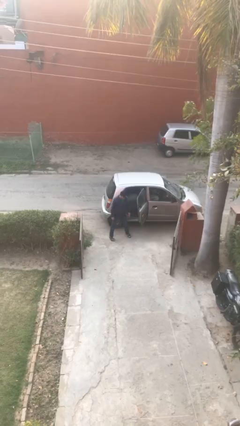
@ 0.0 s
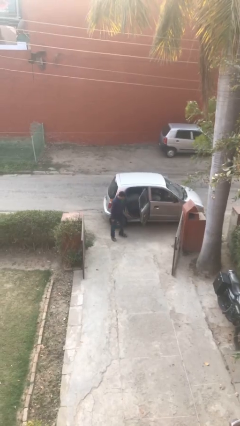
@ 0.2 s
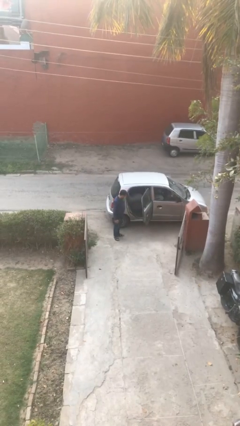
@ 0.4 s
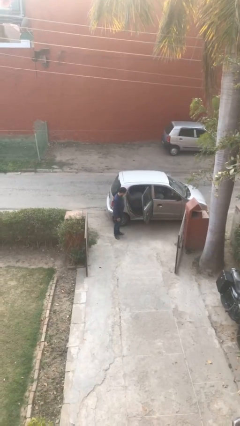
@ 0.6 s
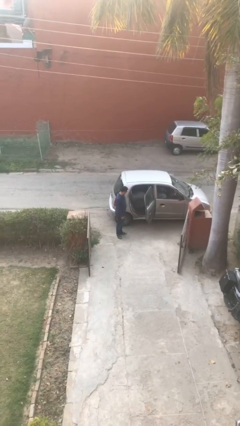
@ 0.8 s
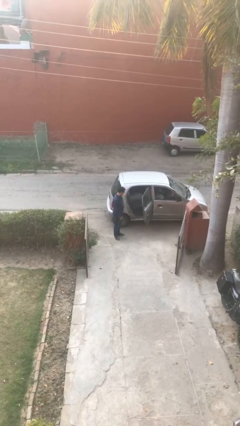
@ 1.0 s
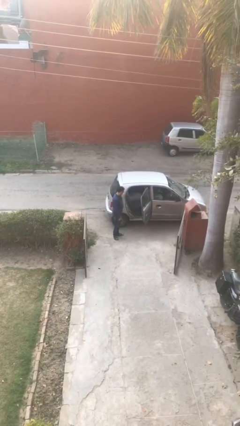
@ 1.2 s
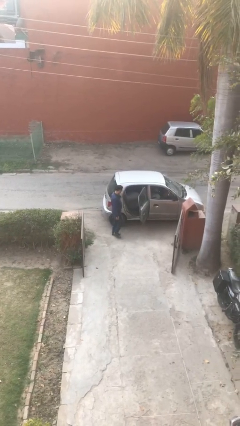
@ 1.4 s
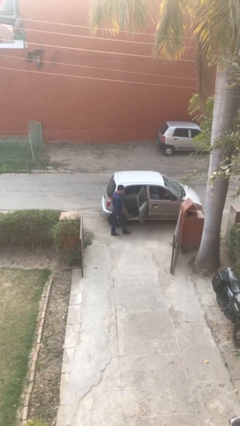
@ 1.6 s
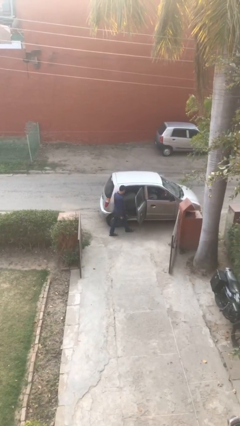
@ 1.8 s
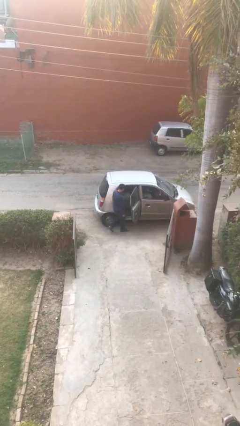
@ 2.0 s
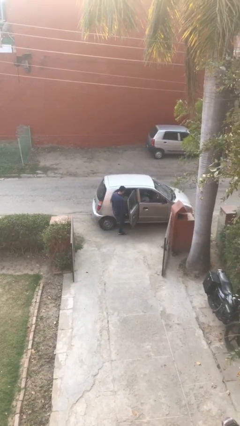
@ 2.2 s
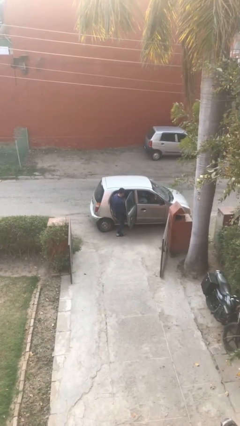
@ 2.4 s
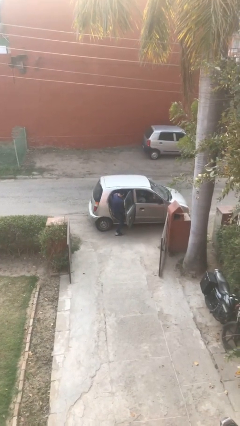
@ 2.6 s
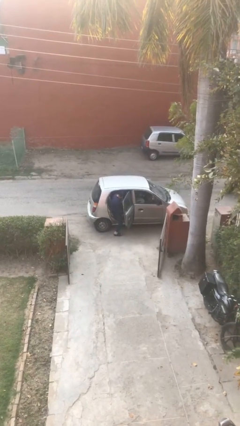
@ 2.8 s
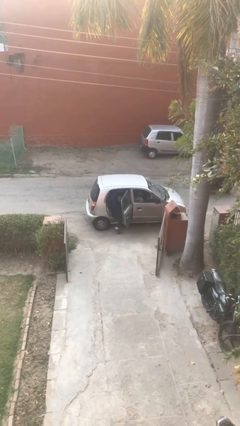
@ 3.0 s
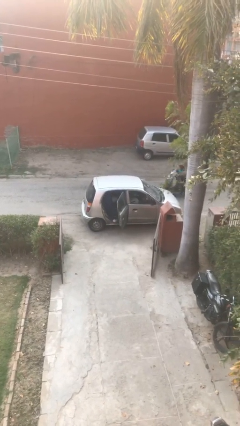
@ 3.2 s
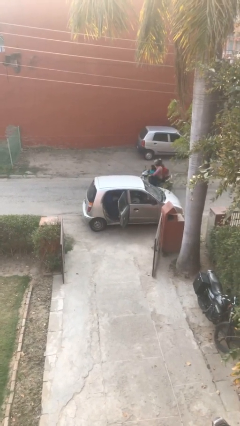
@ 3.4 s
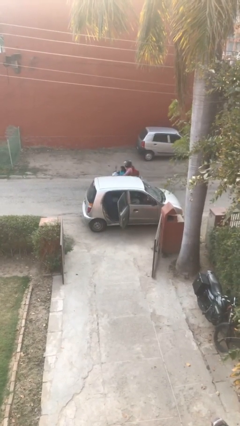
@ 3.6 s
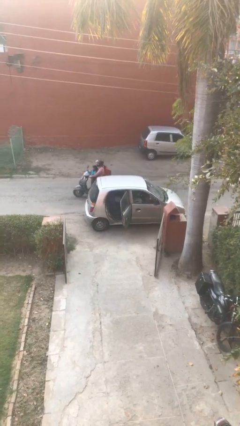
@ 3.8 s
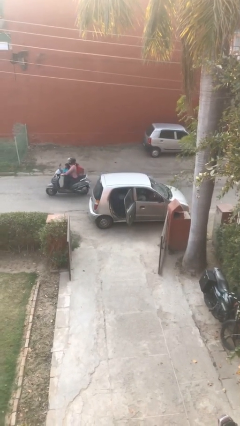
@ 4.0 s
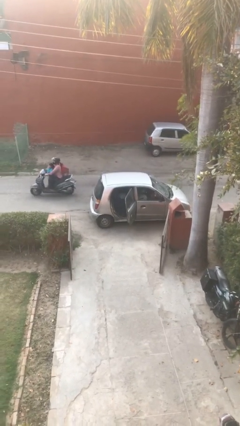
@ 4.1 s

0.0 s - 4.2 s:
person enters car

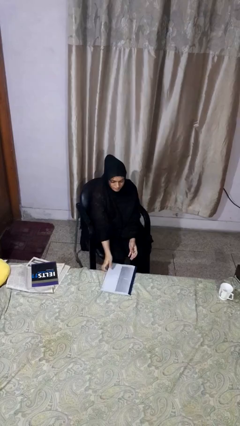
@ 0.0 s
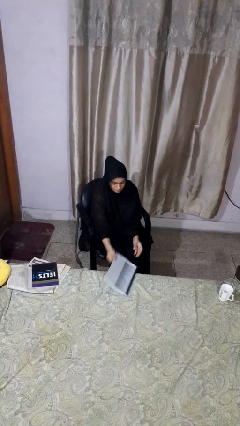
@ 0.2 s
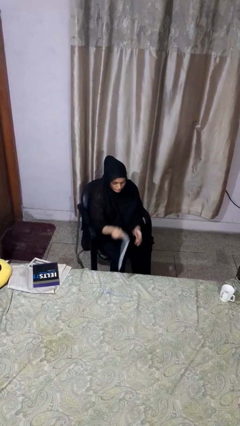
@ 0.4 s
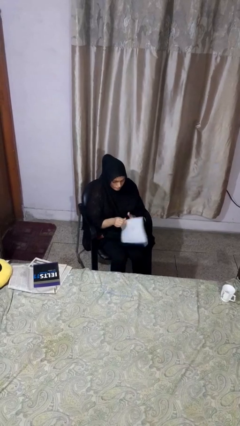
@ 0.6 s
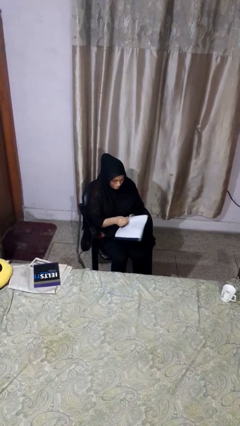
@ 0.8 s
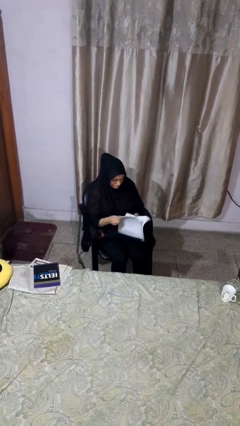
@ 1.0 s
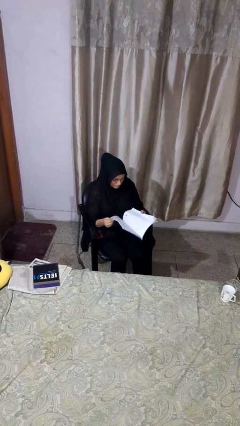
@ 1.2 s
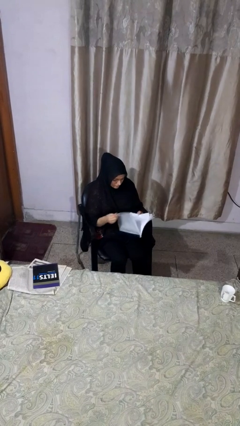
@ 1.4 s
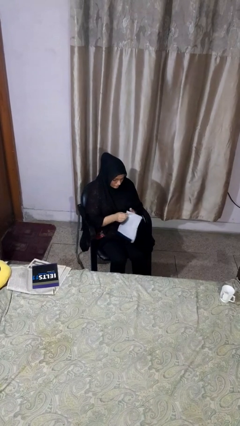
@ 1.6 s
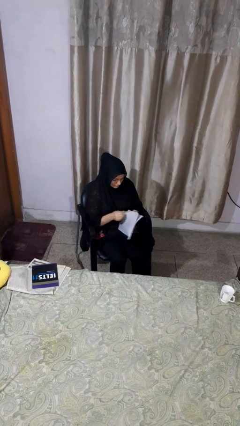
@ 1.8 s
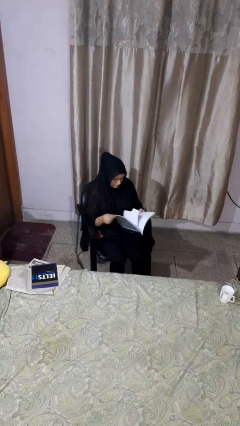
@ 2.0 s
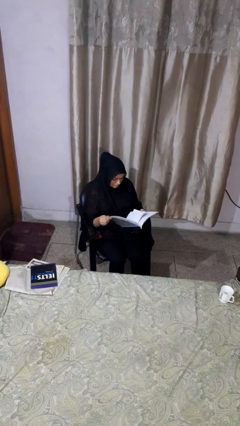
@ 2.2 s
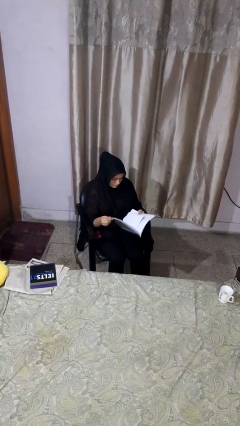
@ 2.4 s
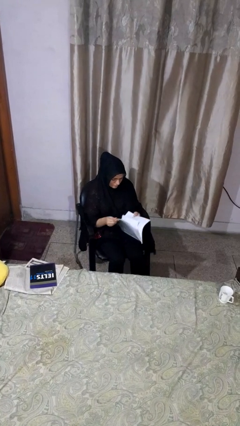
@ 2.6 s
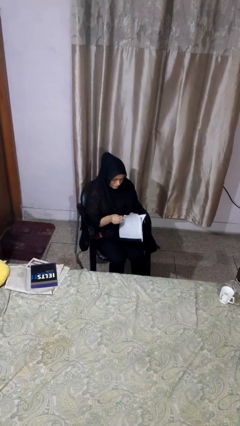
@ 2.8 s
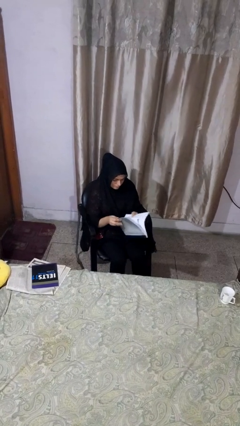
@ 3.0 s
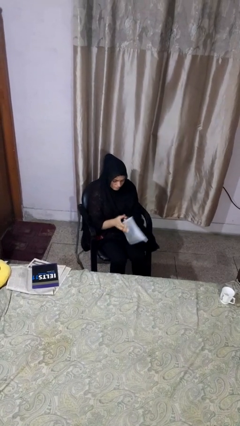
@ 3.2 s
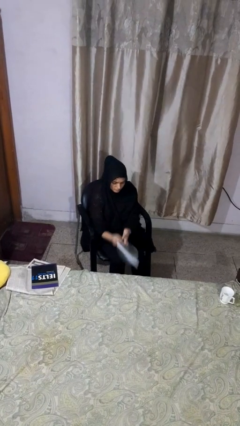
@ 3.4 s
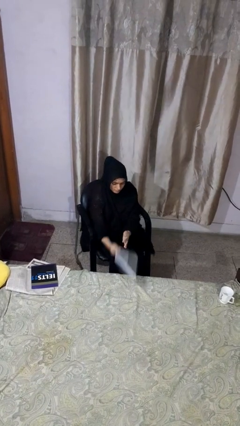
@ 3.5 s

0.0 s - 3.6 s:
person reads magazine

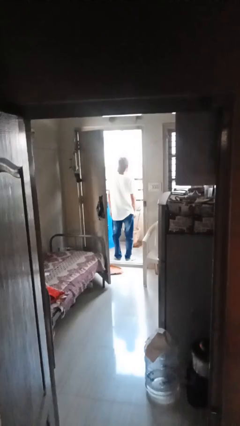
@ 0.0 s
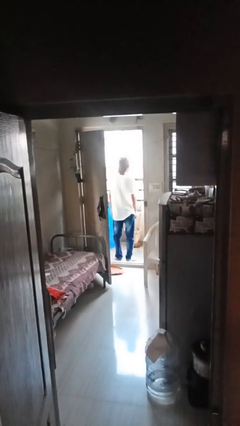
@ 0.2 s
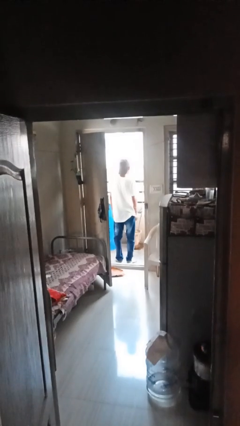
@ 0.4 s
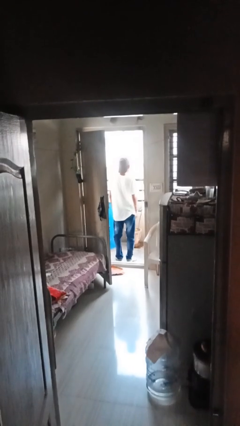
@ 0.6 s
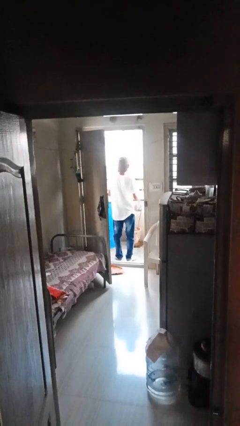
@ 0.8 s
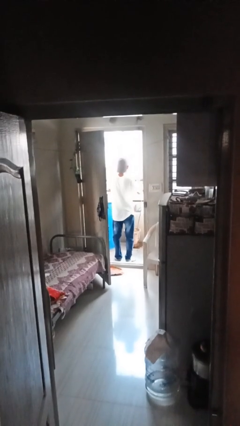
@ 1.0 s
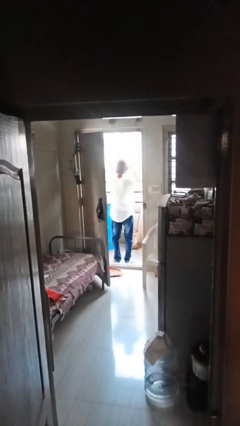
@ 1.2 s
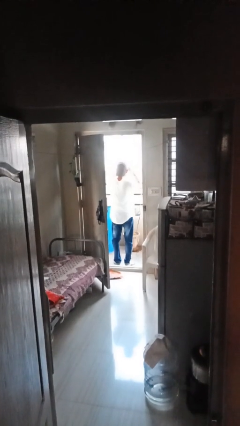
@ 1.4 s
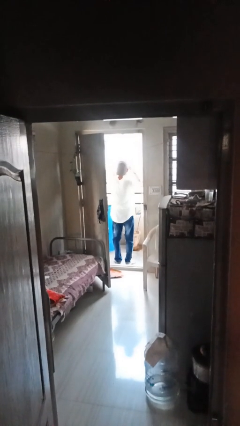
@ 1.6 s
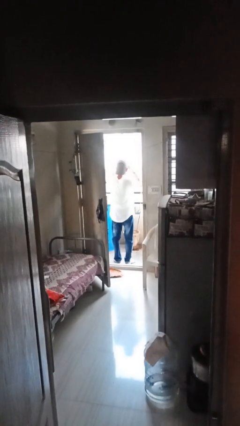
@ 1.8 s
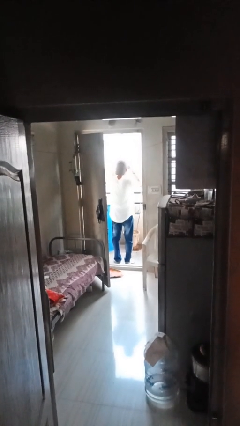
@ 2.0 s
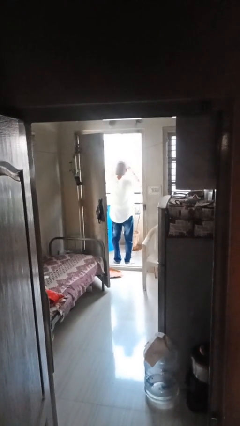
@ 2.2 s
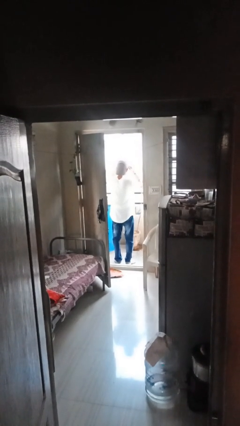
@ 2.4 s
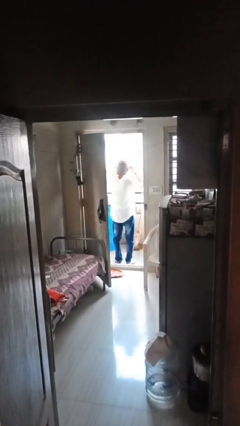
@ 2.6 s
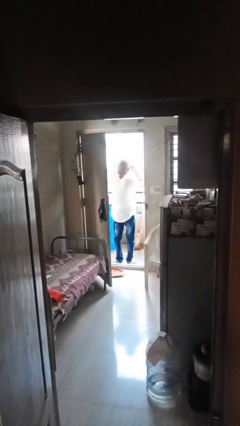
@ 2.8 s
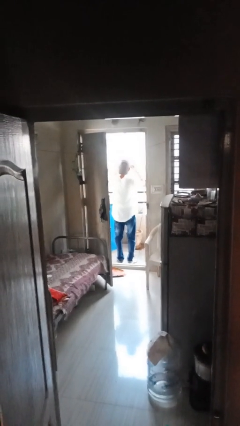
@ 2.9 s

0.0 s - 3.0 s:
person shades eyes

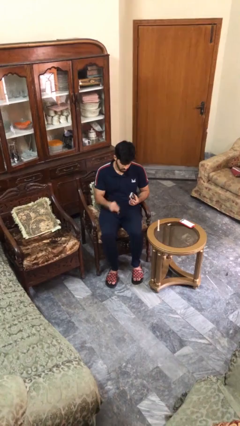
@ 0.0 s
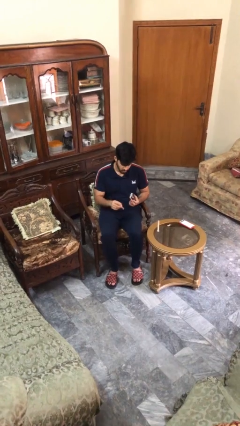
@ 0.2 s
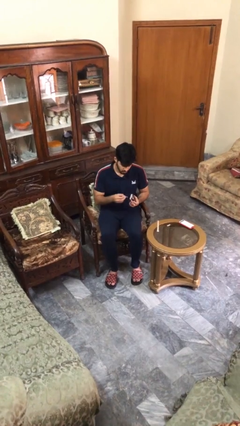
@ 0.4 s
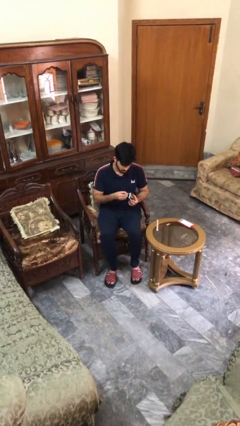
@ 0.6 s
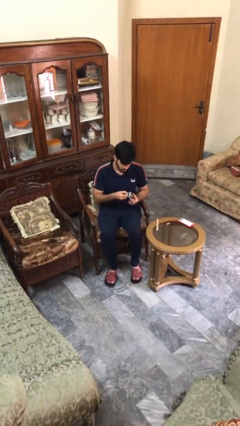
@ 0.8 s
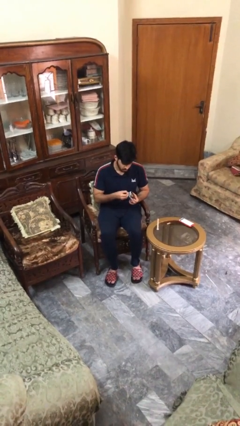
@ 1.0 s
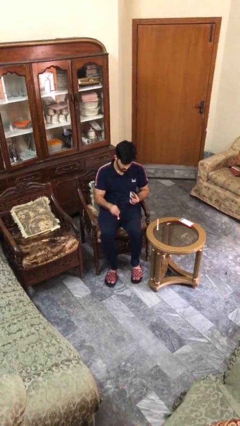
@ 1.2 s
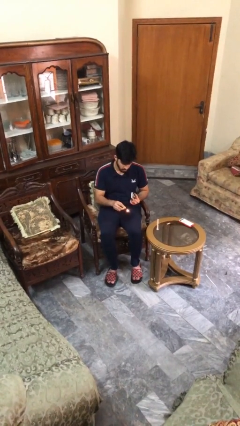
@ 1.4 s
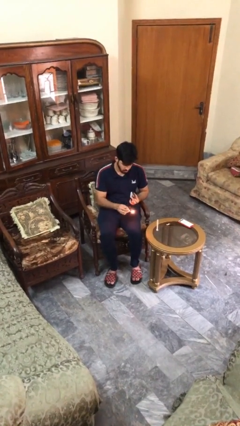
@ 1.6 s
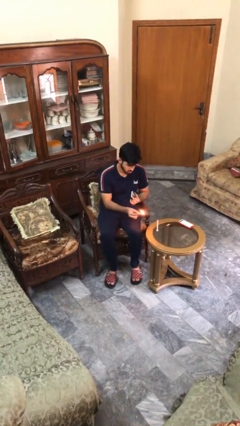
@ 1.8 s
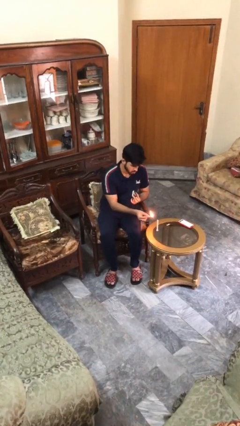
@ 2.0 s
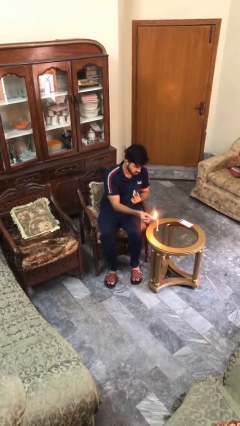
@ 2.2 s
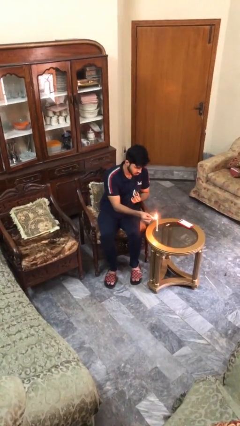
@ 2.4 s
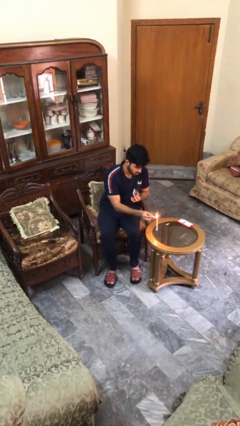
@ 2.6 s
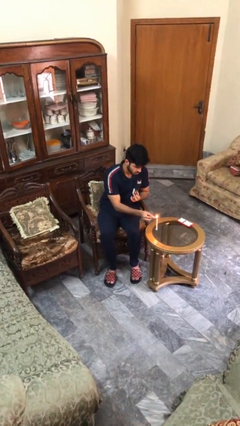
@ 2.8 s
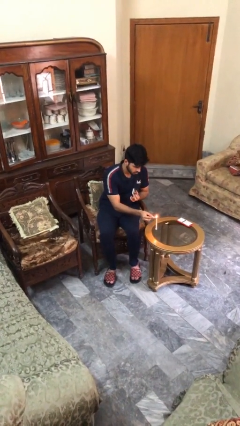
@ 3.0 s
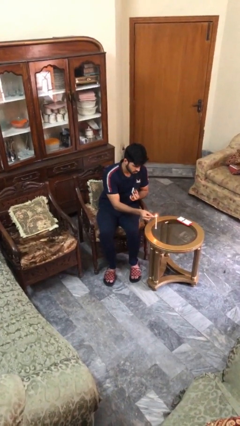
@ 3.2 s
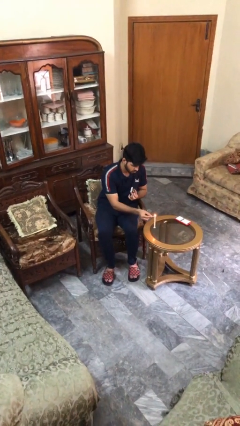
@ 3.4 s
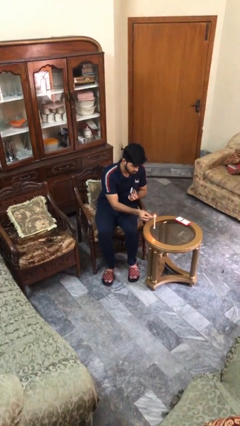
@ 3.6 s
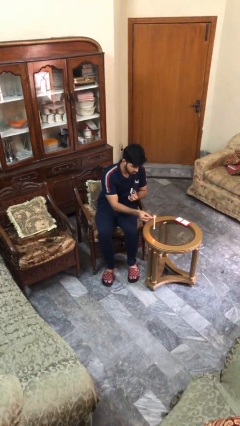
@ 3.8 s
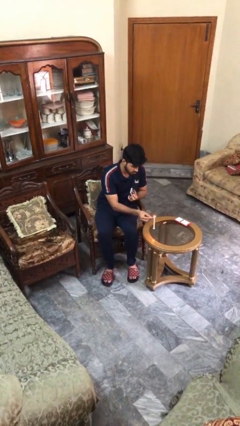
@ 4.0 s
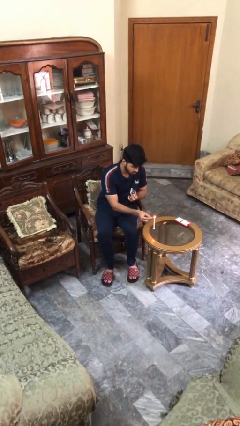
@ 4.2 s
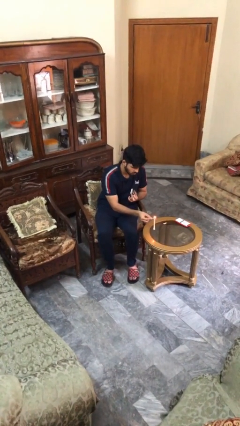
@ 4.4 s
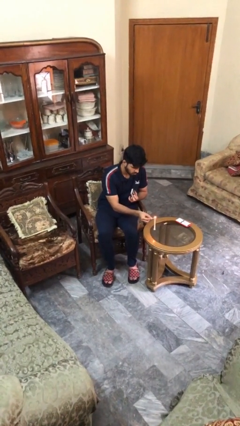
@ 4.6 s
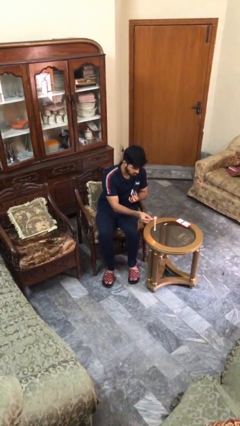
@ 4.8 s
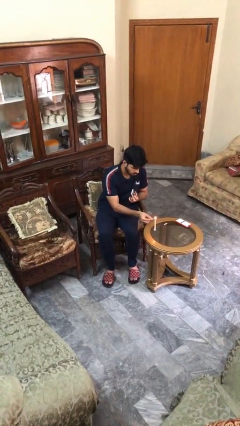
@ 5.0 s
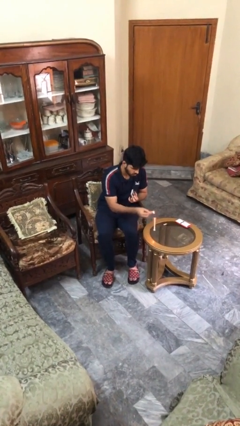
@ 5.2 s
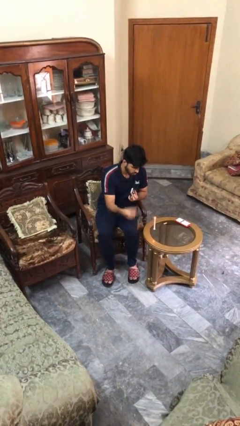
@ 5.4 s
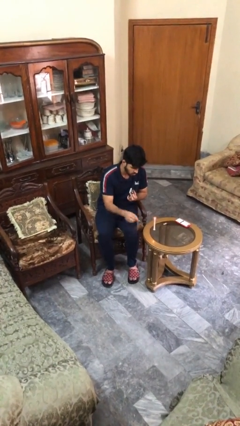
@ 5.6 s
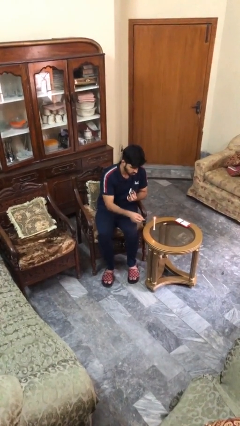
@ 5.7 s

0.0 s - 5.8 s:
person lights candle

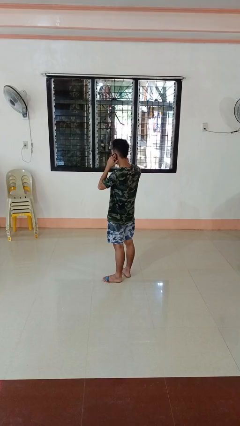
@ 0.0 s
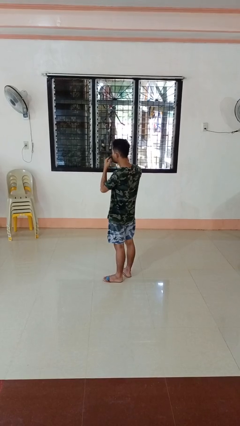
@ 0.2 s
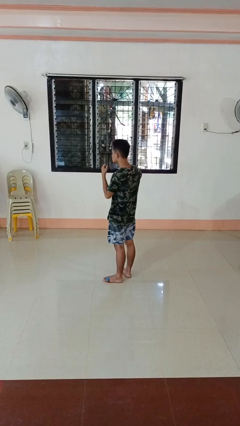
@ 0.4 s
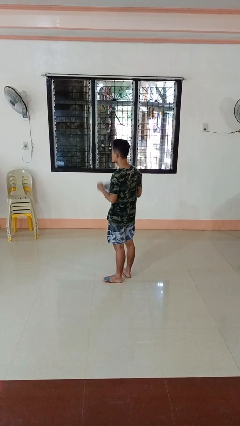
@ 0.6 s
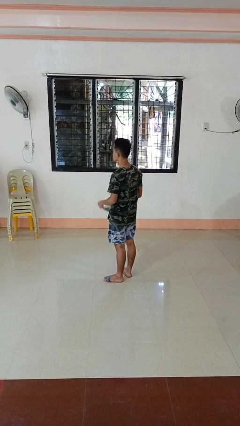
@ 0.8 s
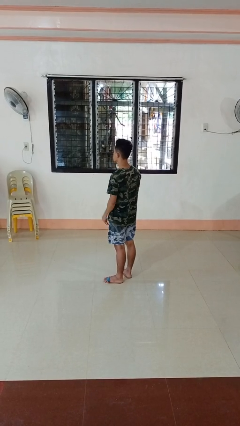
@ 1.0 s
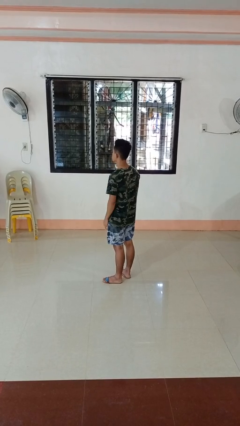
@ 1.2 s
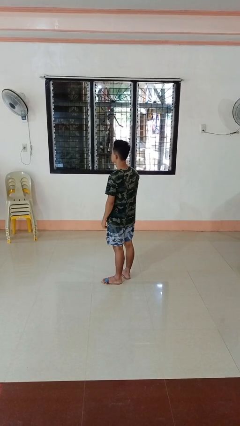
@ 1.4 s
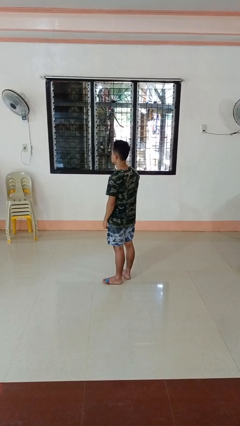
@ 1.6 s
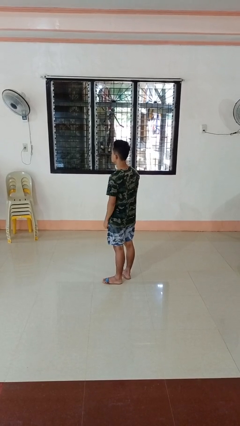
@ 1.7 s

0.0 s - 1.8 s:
person takes off facemask
